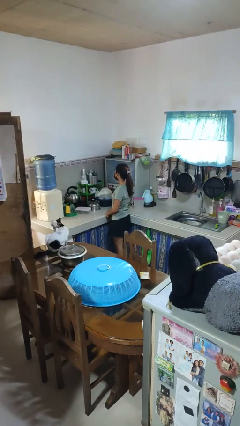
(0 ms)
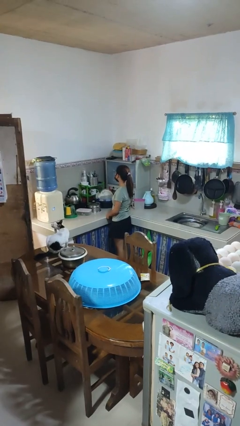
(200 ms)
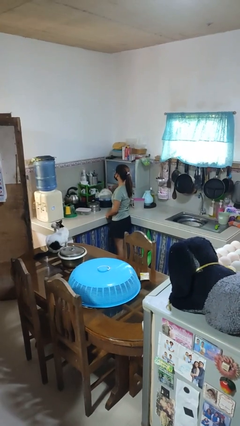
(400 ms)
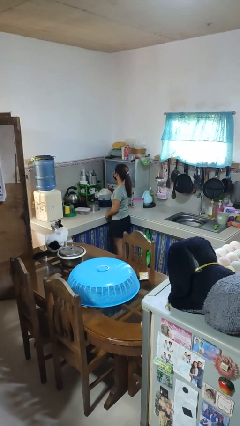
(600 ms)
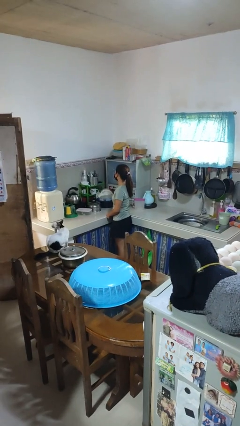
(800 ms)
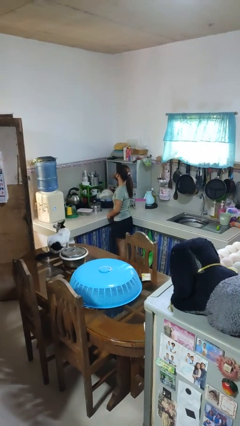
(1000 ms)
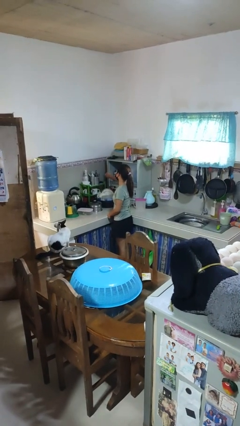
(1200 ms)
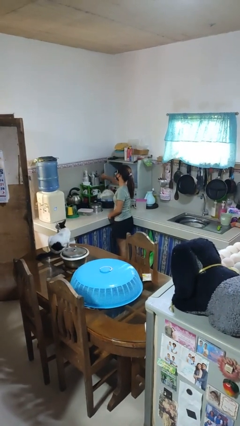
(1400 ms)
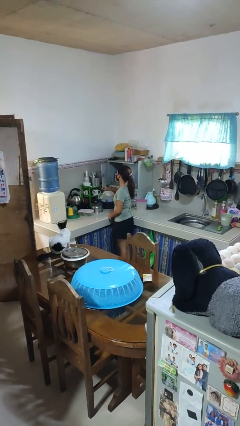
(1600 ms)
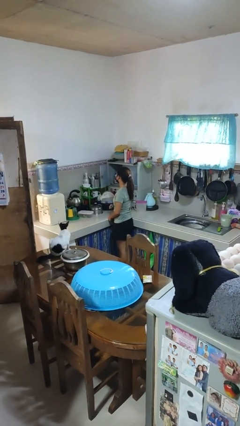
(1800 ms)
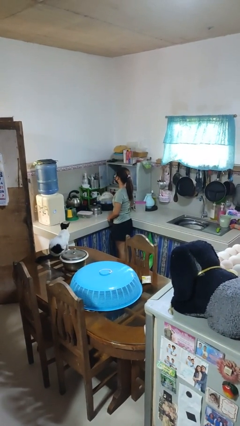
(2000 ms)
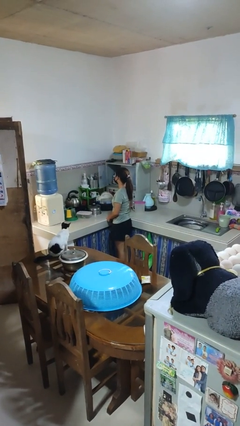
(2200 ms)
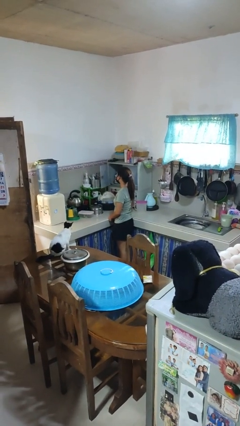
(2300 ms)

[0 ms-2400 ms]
person opens kitchen drawer

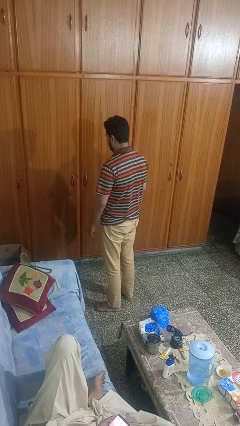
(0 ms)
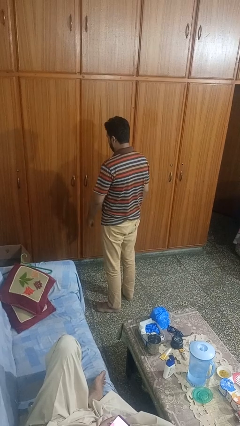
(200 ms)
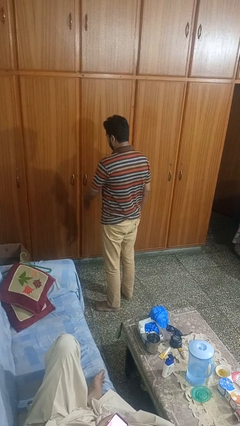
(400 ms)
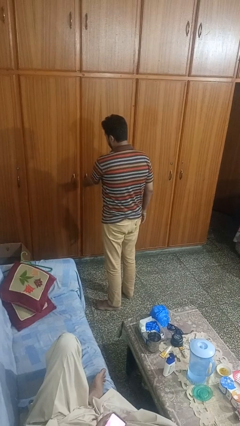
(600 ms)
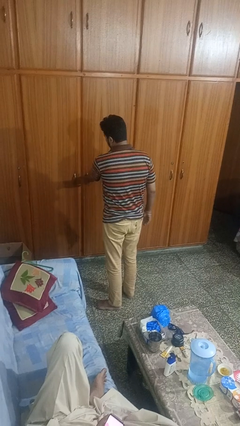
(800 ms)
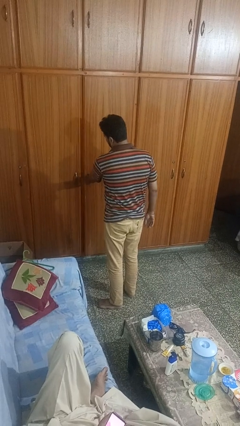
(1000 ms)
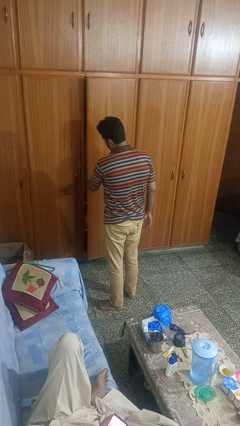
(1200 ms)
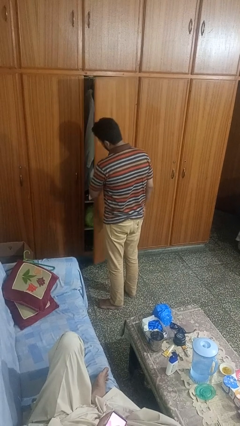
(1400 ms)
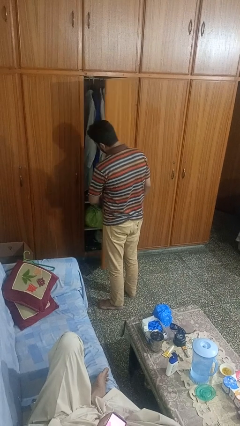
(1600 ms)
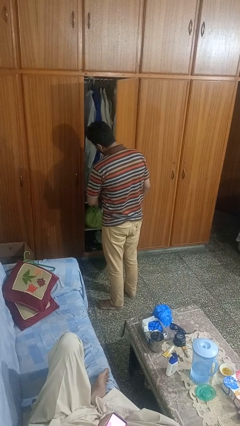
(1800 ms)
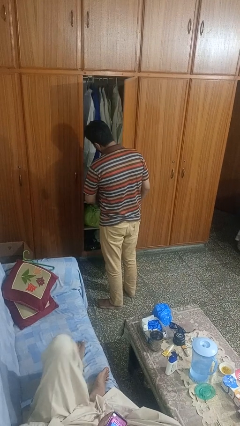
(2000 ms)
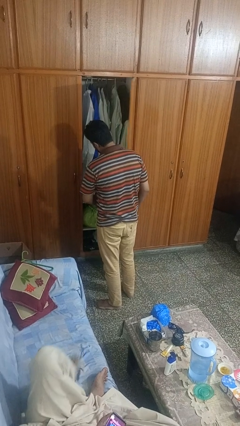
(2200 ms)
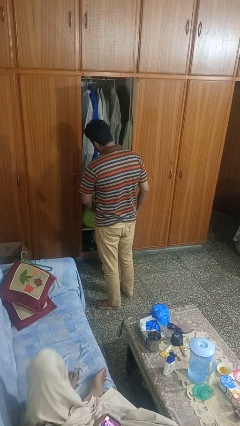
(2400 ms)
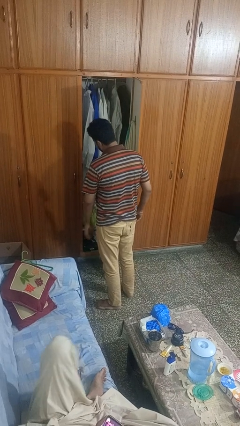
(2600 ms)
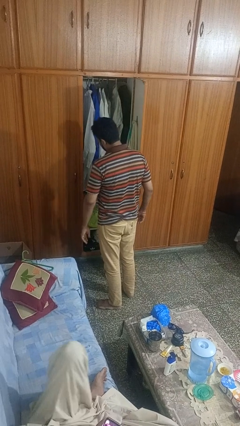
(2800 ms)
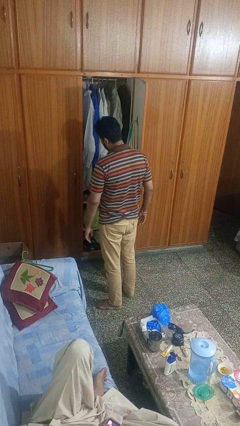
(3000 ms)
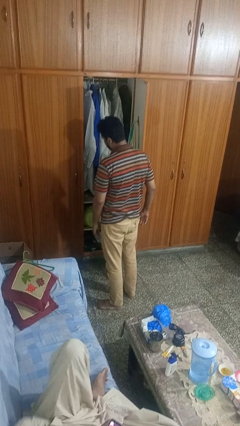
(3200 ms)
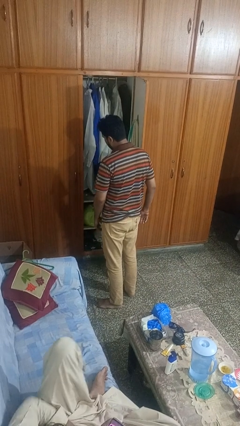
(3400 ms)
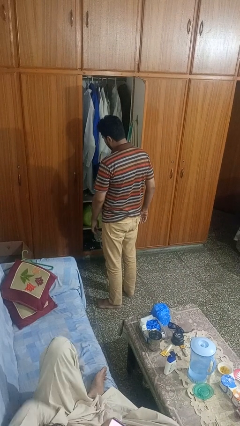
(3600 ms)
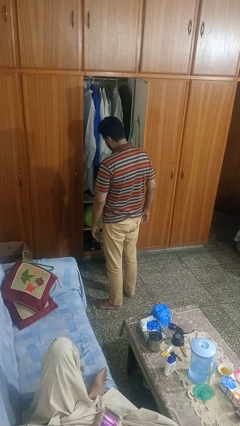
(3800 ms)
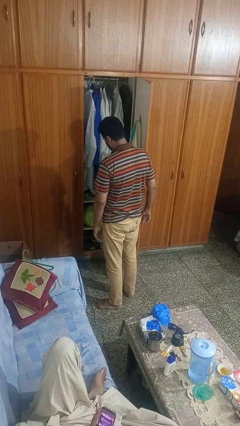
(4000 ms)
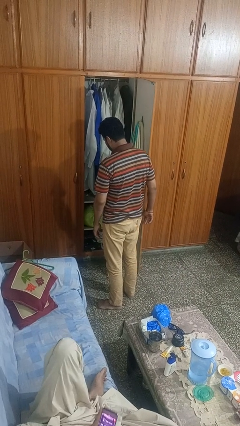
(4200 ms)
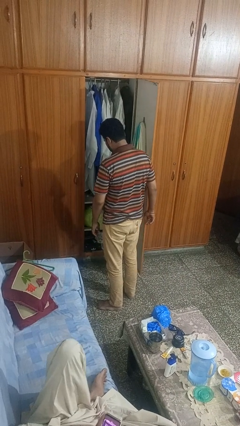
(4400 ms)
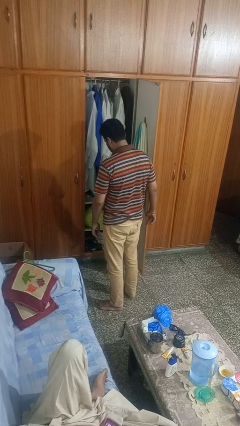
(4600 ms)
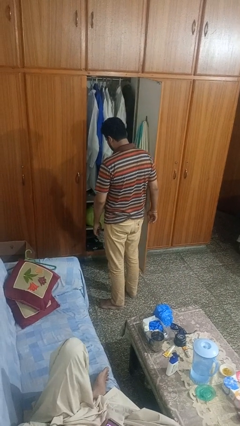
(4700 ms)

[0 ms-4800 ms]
person opens closet door

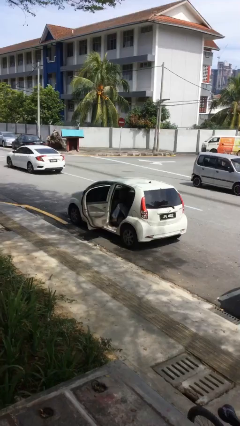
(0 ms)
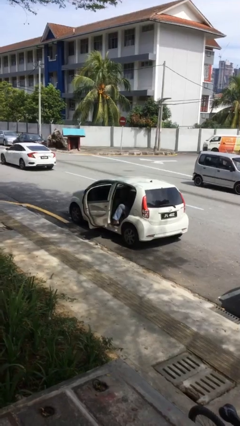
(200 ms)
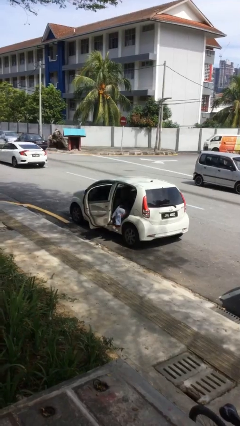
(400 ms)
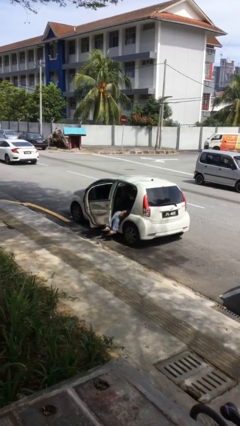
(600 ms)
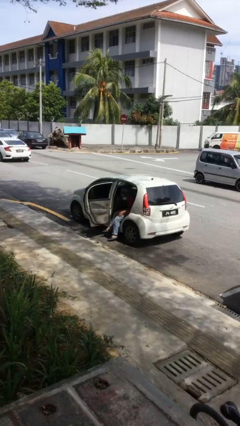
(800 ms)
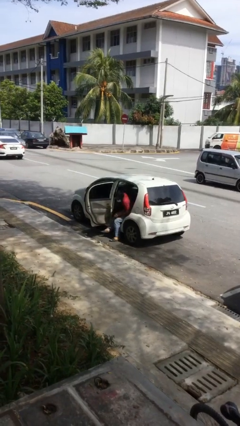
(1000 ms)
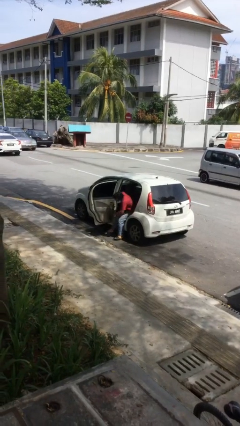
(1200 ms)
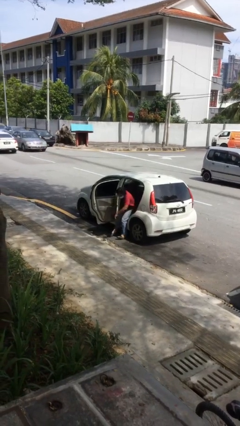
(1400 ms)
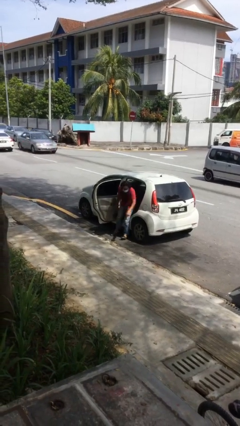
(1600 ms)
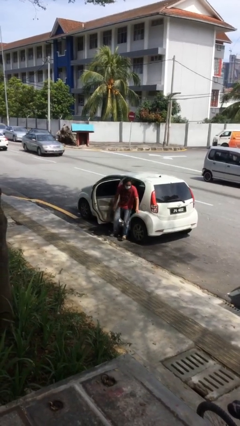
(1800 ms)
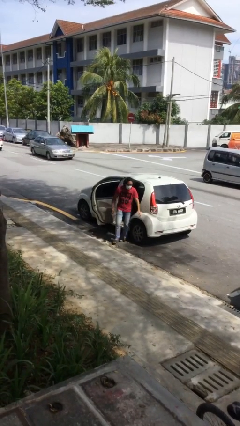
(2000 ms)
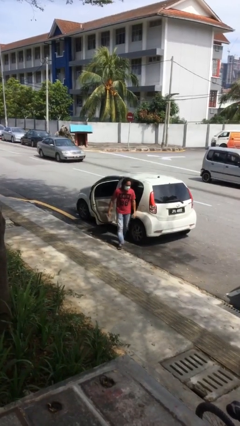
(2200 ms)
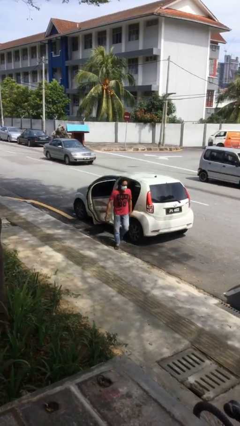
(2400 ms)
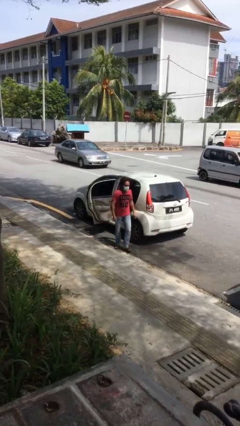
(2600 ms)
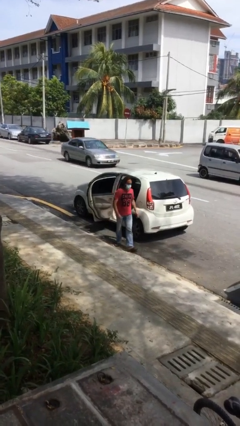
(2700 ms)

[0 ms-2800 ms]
person exits car

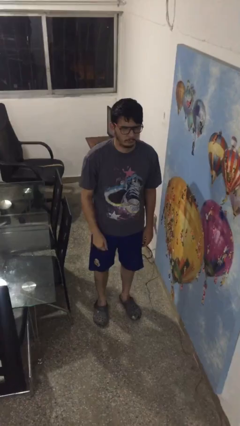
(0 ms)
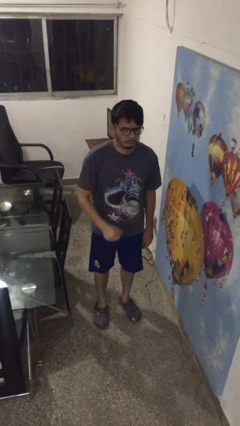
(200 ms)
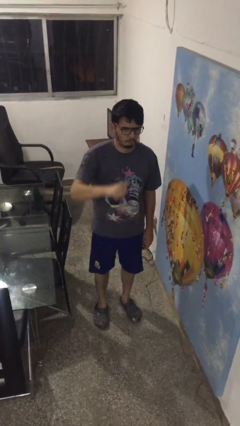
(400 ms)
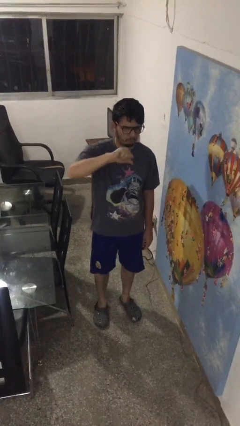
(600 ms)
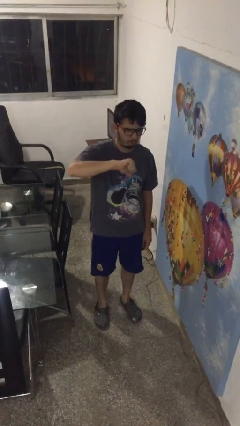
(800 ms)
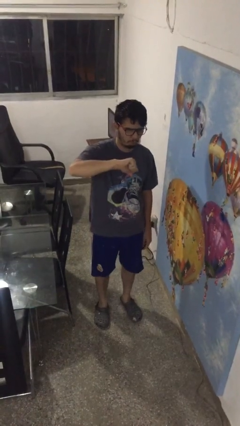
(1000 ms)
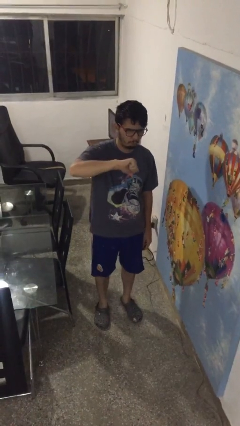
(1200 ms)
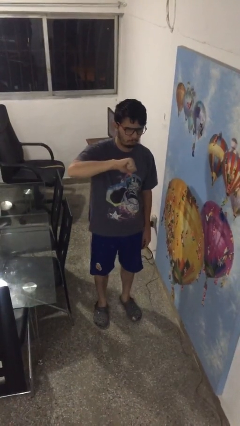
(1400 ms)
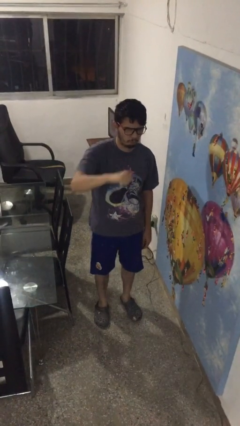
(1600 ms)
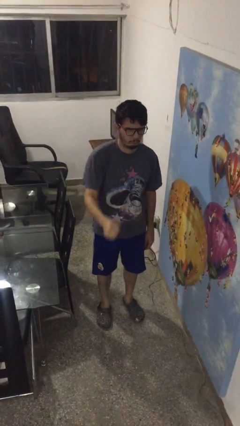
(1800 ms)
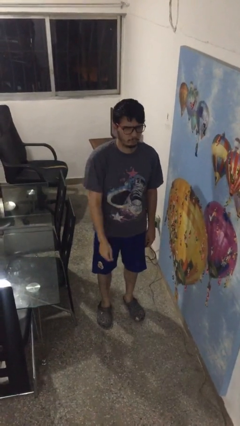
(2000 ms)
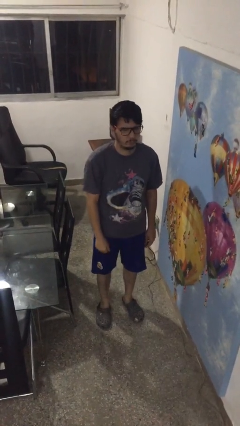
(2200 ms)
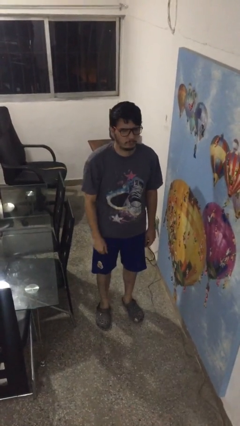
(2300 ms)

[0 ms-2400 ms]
person gestures thumbs down

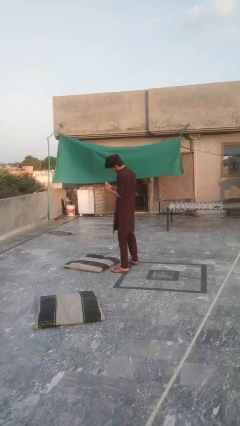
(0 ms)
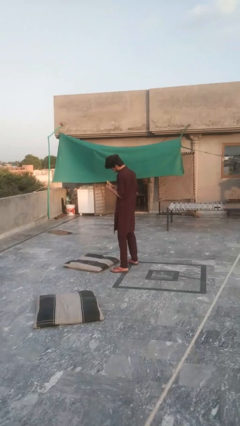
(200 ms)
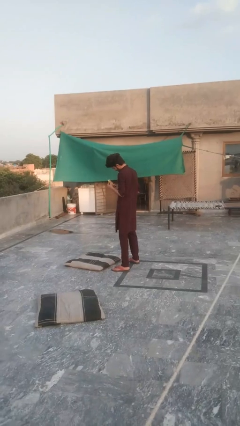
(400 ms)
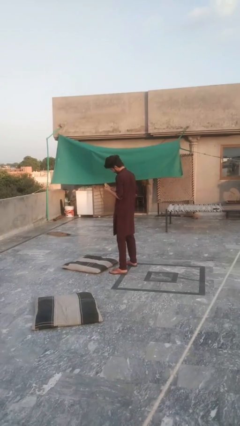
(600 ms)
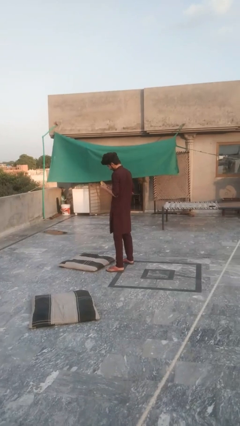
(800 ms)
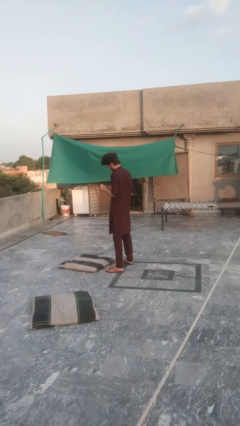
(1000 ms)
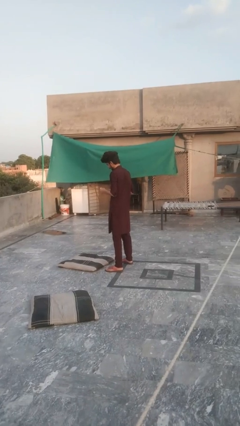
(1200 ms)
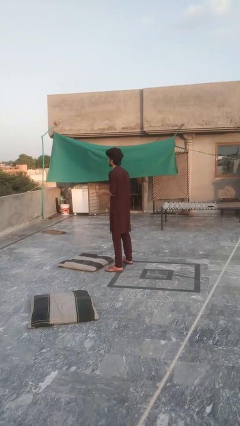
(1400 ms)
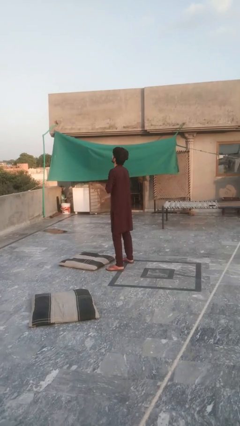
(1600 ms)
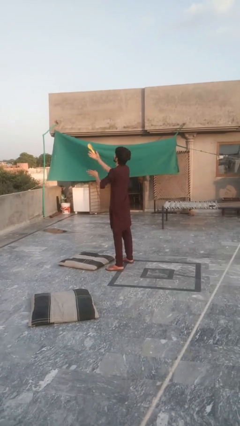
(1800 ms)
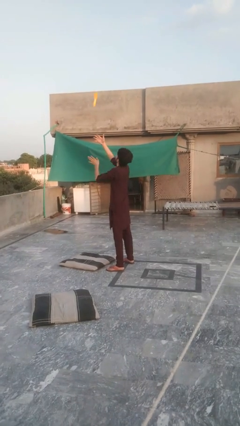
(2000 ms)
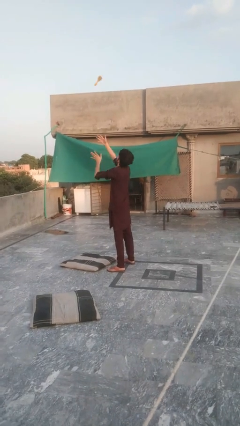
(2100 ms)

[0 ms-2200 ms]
person drops object

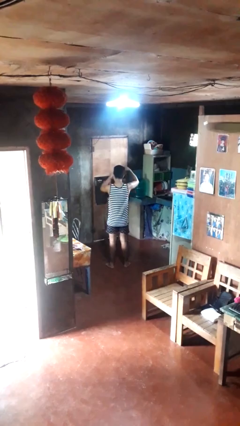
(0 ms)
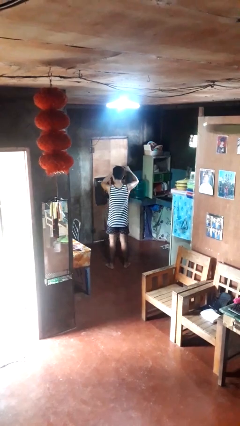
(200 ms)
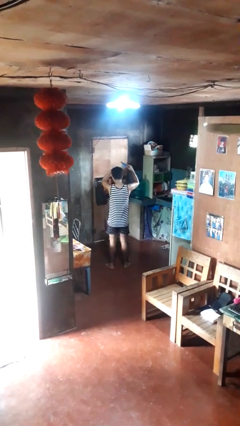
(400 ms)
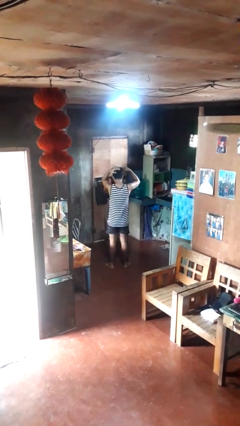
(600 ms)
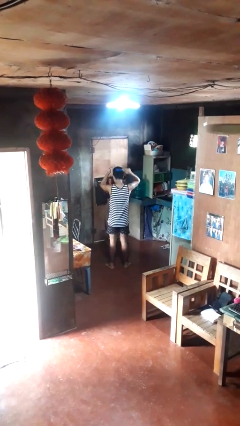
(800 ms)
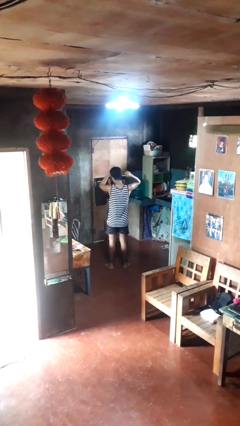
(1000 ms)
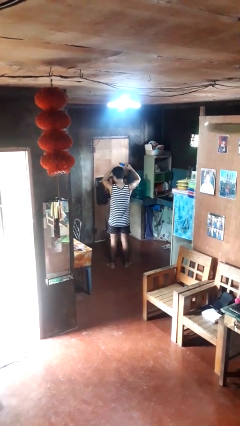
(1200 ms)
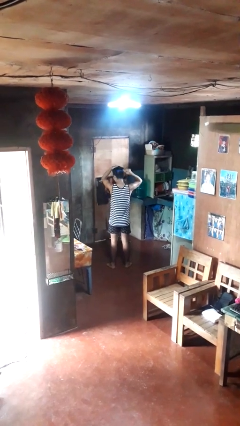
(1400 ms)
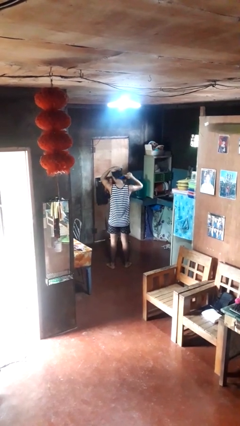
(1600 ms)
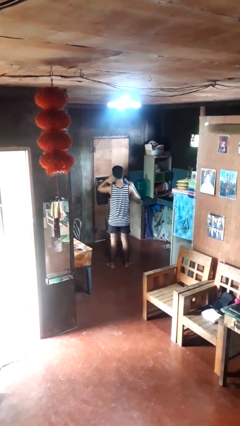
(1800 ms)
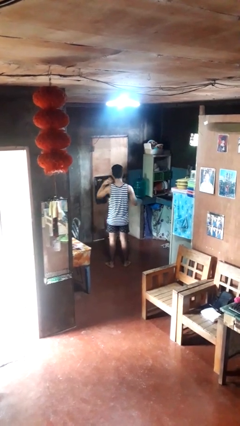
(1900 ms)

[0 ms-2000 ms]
person brushes hair

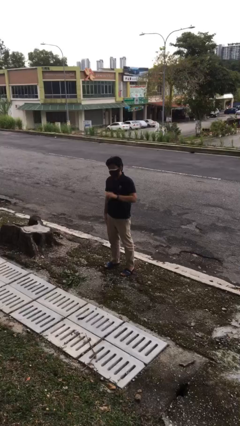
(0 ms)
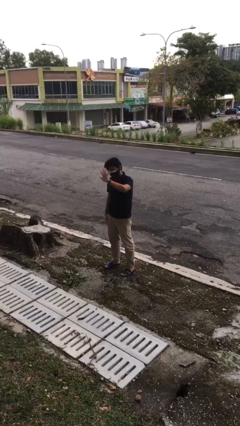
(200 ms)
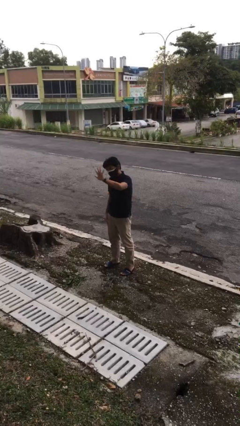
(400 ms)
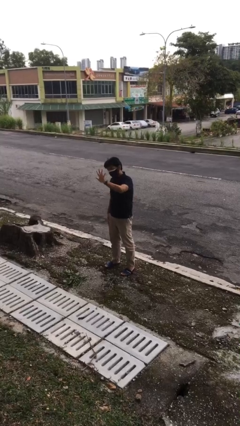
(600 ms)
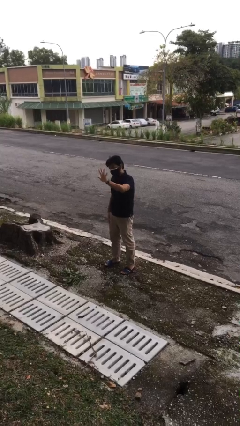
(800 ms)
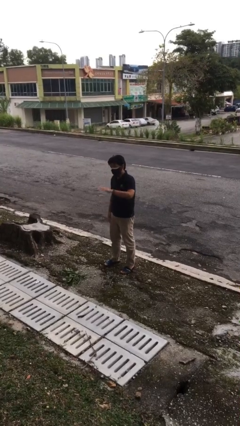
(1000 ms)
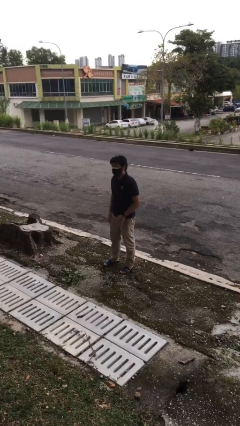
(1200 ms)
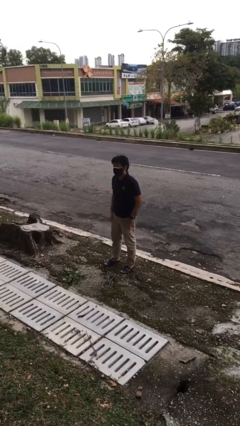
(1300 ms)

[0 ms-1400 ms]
person gestures number five
